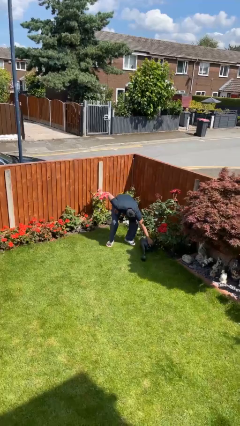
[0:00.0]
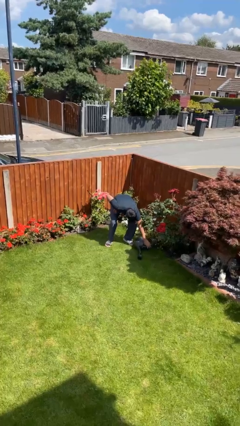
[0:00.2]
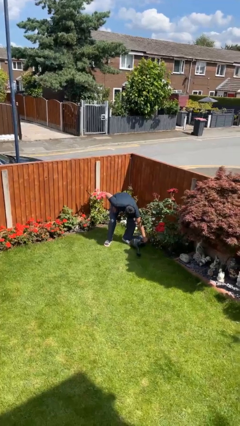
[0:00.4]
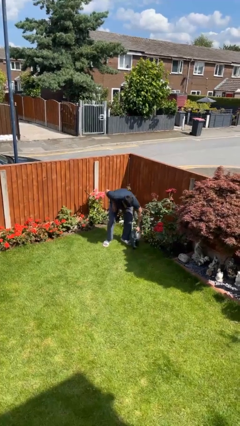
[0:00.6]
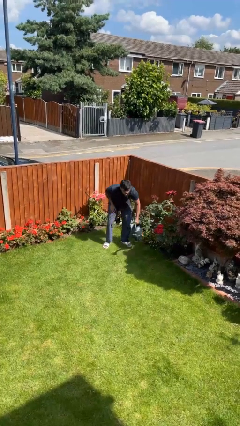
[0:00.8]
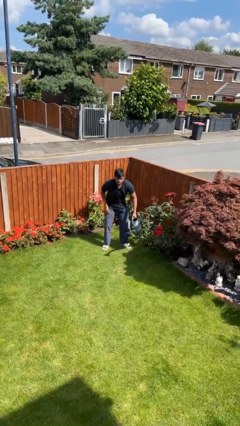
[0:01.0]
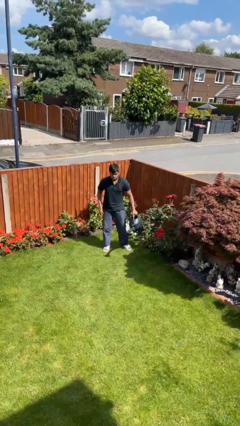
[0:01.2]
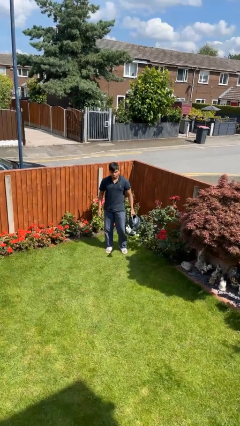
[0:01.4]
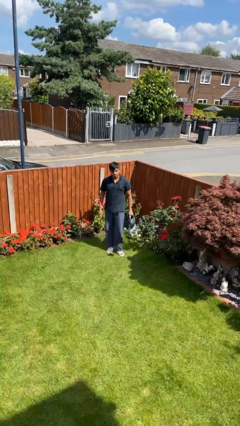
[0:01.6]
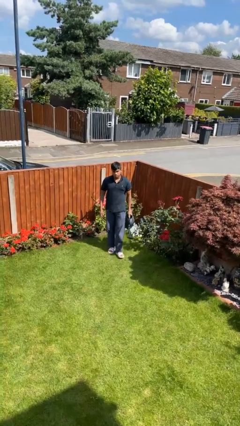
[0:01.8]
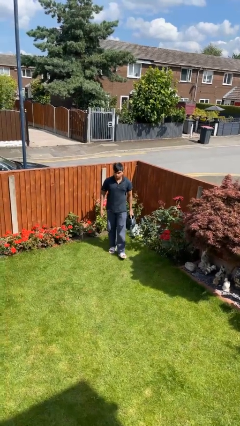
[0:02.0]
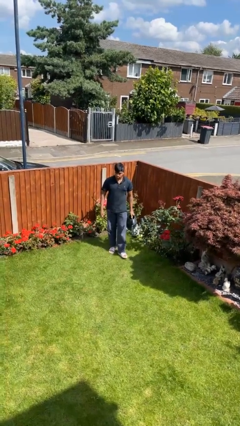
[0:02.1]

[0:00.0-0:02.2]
person picks up object from floor

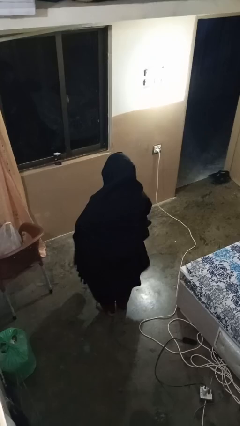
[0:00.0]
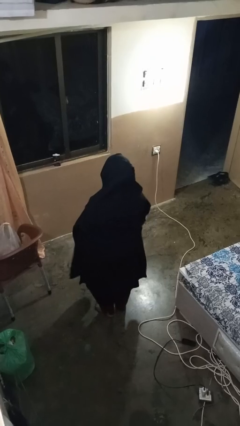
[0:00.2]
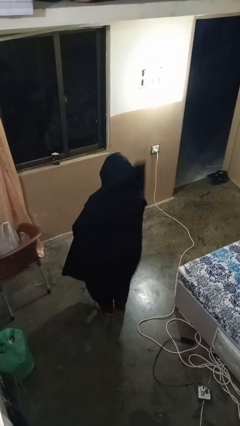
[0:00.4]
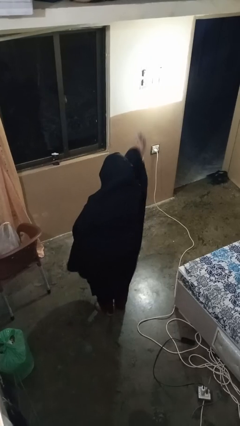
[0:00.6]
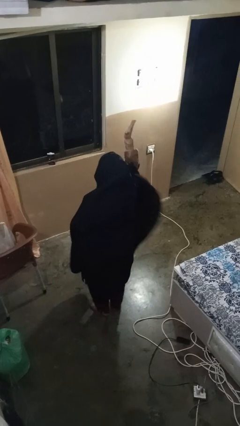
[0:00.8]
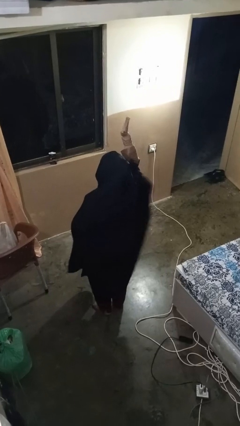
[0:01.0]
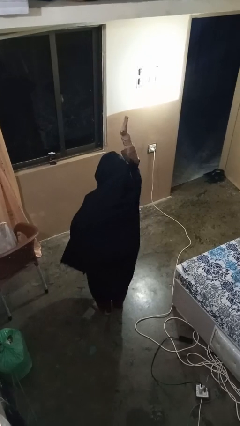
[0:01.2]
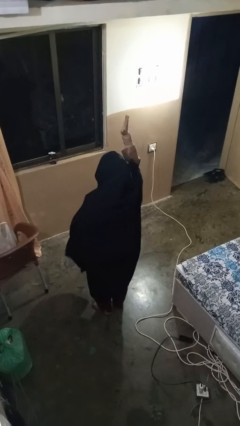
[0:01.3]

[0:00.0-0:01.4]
person gestures raise hand

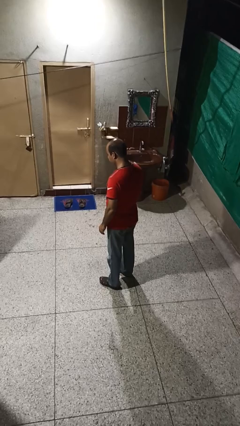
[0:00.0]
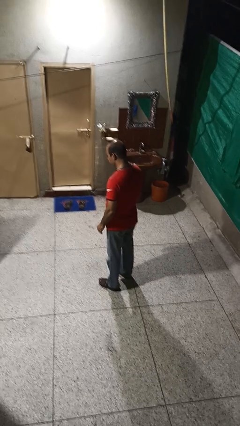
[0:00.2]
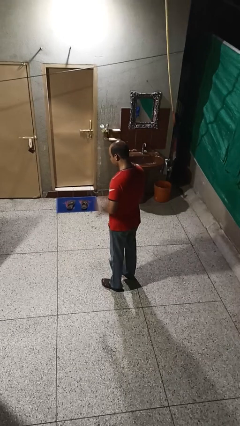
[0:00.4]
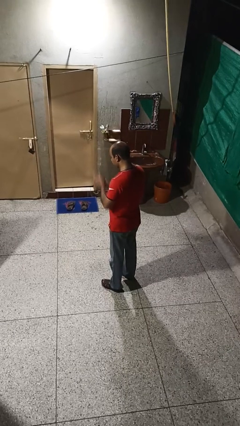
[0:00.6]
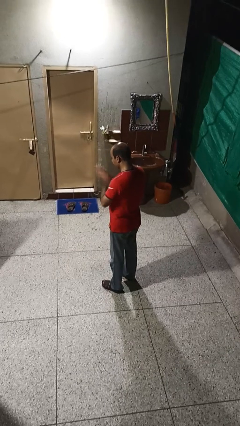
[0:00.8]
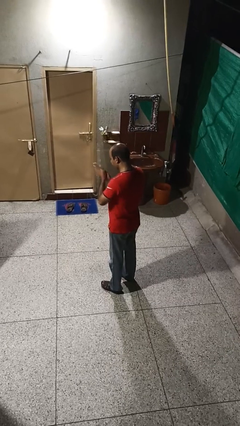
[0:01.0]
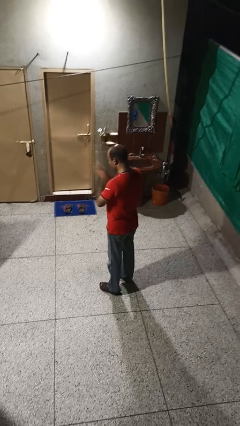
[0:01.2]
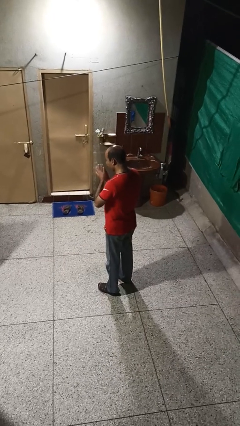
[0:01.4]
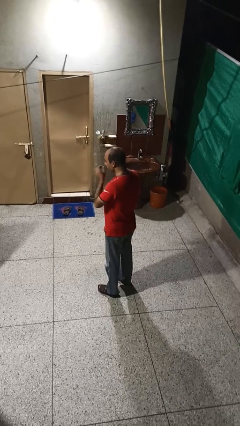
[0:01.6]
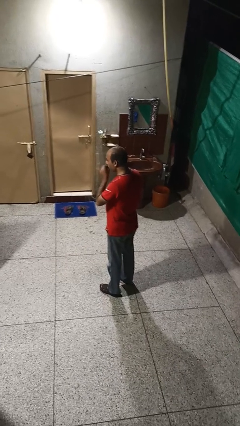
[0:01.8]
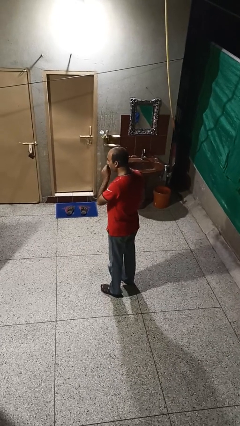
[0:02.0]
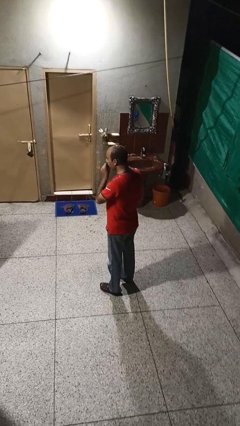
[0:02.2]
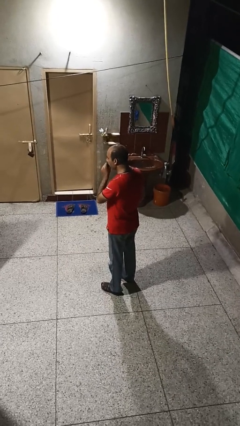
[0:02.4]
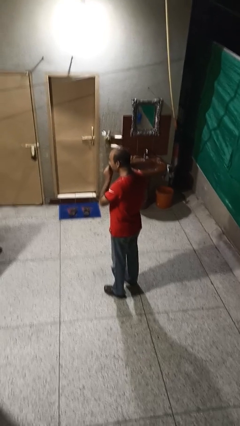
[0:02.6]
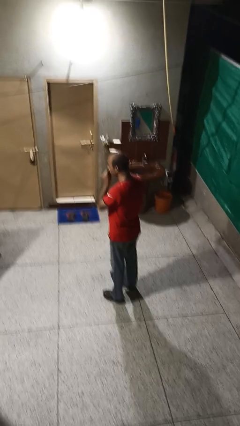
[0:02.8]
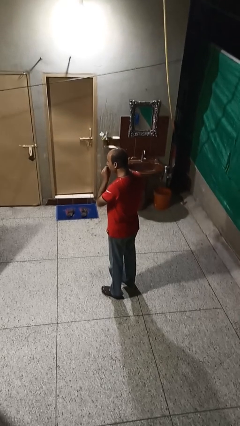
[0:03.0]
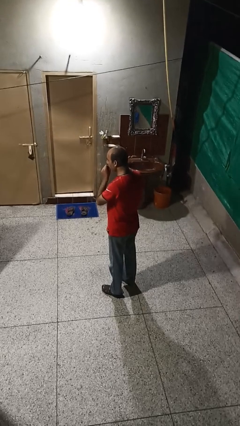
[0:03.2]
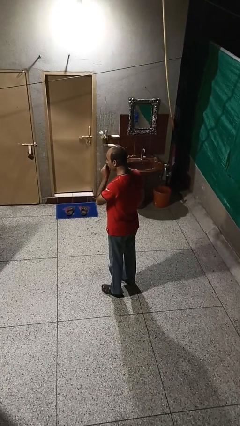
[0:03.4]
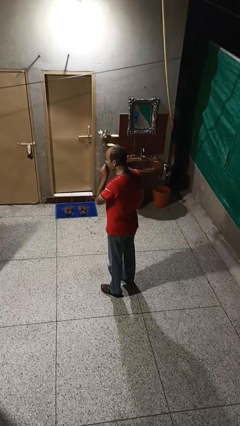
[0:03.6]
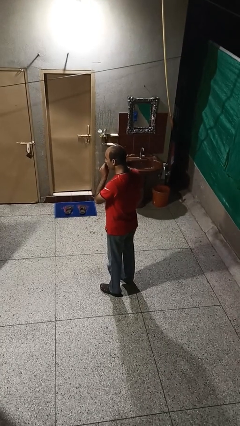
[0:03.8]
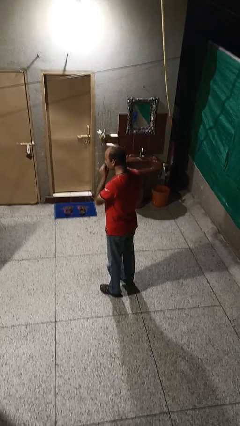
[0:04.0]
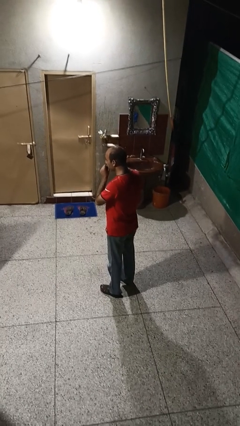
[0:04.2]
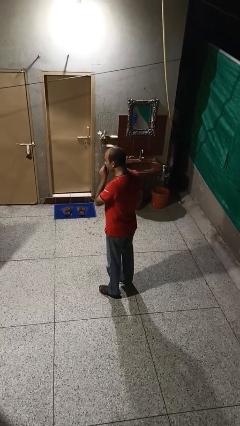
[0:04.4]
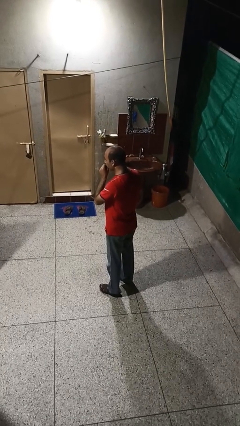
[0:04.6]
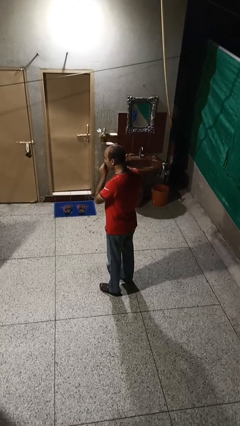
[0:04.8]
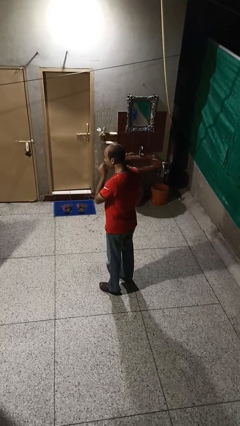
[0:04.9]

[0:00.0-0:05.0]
person blows into hands

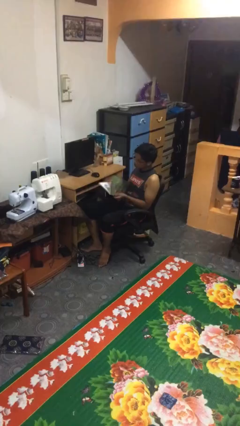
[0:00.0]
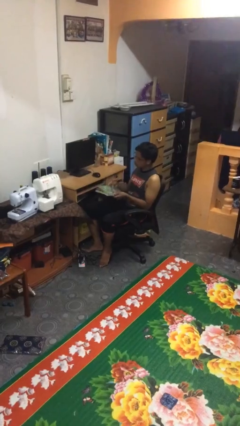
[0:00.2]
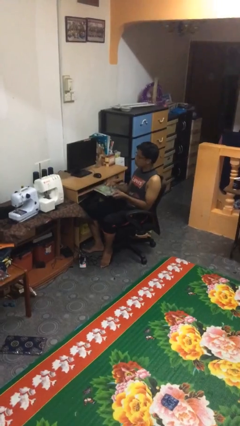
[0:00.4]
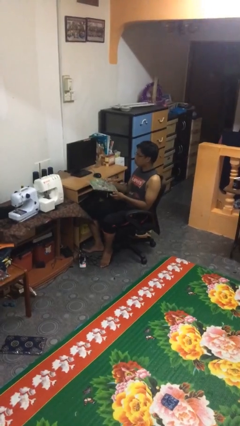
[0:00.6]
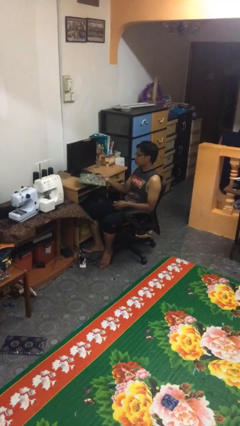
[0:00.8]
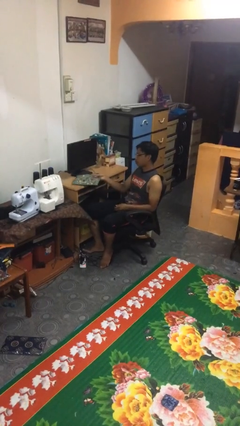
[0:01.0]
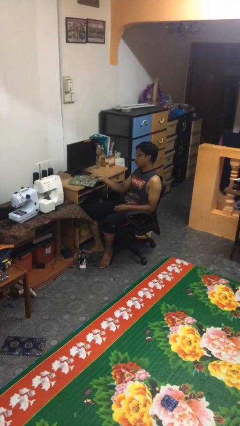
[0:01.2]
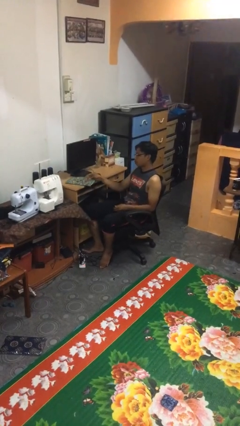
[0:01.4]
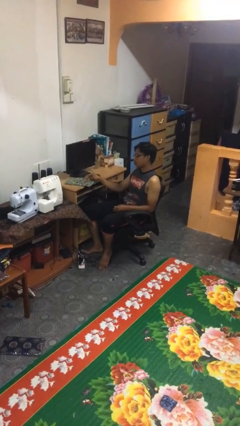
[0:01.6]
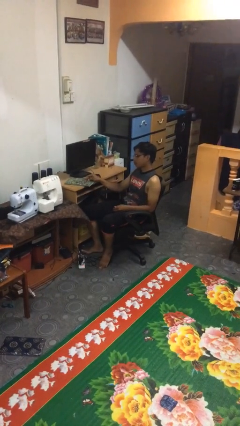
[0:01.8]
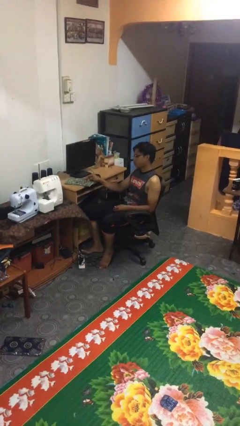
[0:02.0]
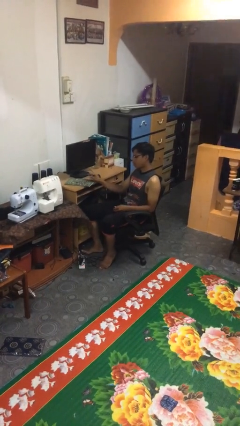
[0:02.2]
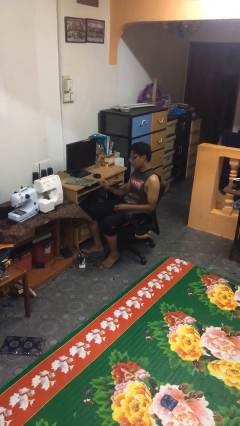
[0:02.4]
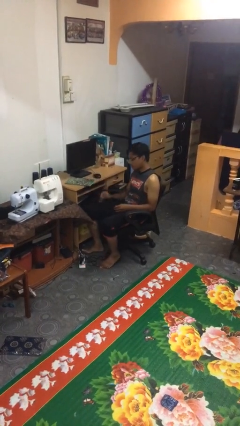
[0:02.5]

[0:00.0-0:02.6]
person puts down object on table

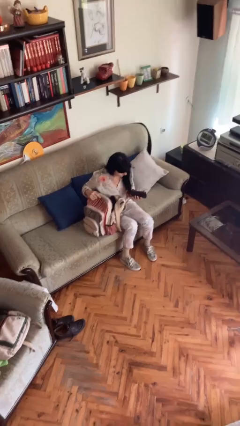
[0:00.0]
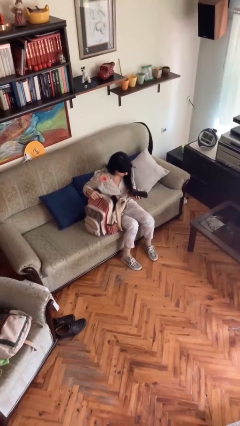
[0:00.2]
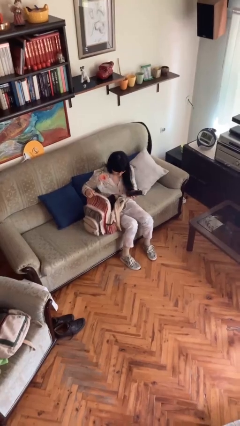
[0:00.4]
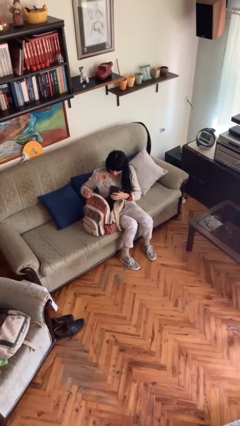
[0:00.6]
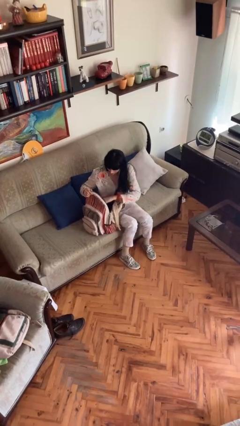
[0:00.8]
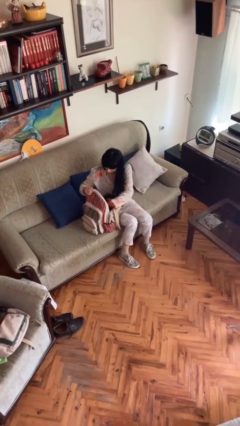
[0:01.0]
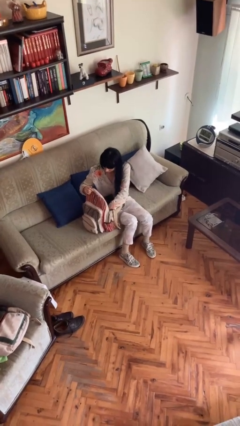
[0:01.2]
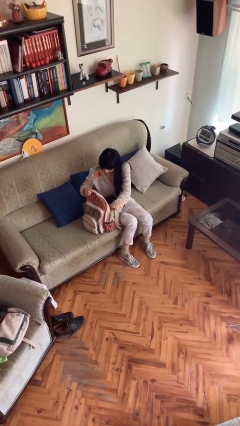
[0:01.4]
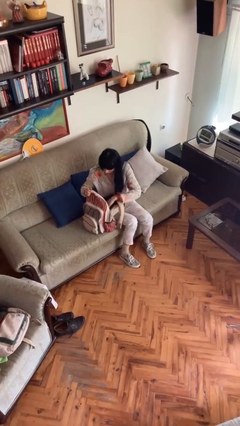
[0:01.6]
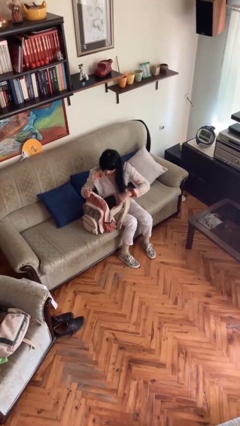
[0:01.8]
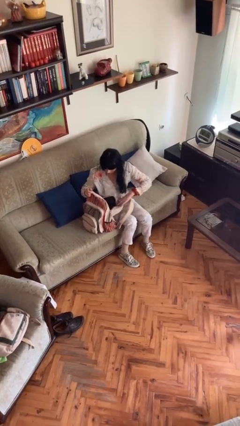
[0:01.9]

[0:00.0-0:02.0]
person puts object into backpack

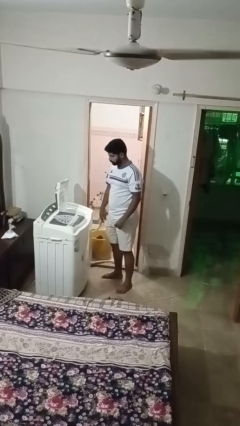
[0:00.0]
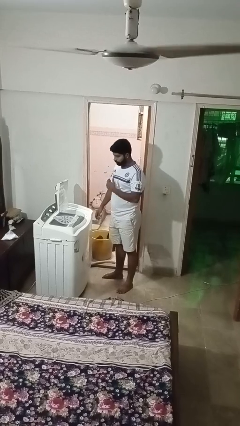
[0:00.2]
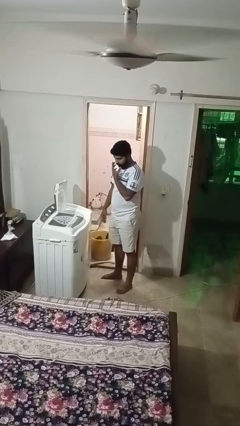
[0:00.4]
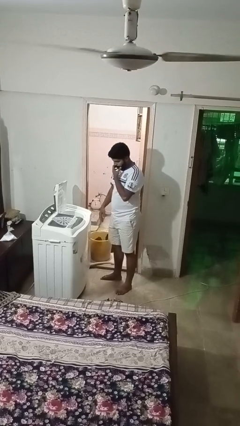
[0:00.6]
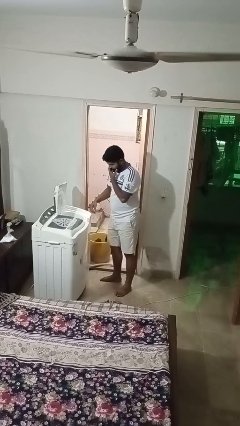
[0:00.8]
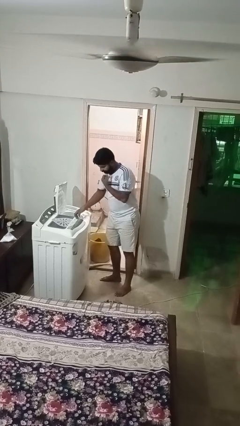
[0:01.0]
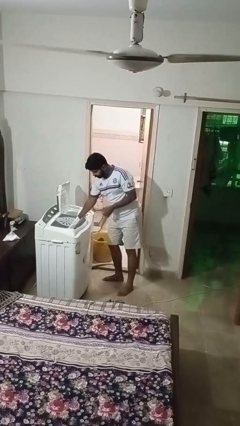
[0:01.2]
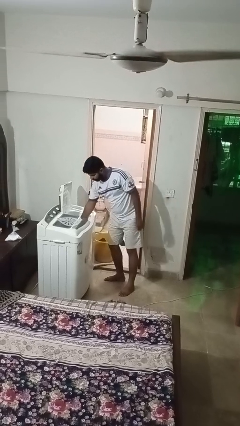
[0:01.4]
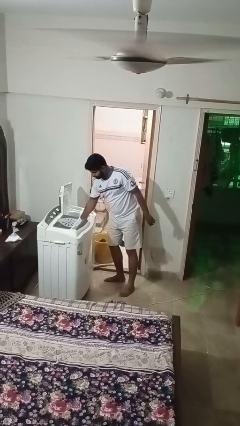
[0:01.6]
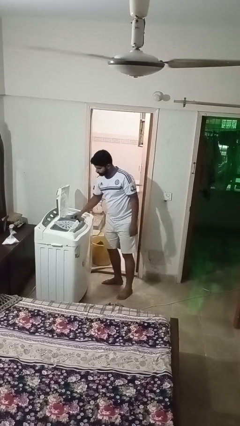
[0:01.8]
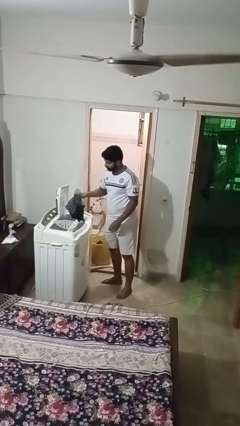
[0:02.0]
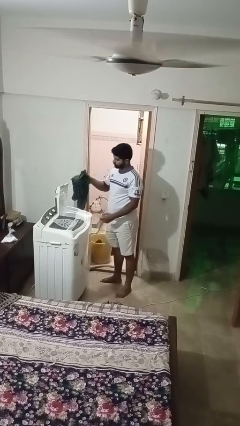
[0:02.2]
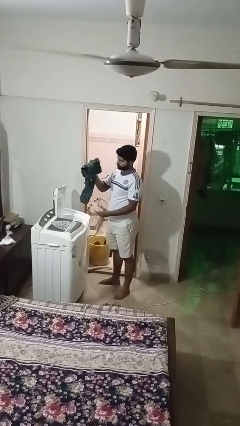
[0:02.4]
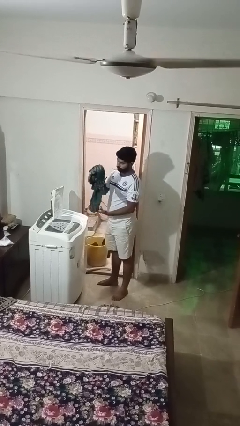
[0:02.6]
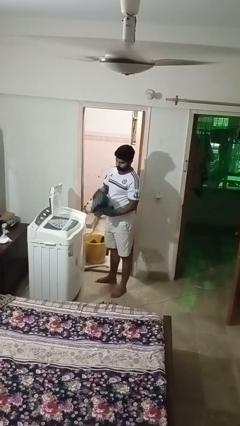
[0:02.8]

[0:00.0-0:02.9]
person unloads dryer

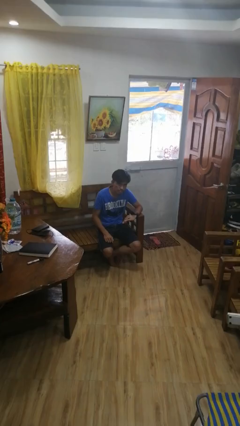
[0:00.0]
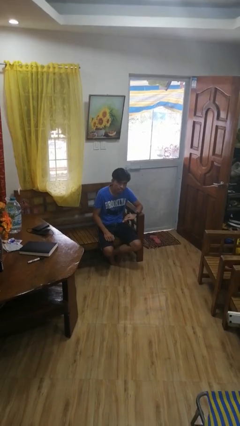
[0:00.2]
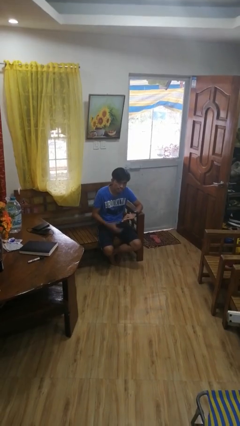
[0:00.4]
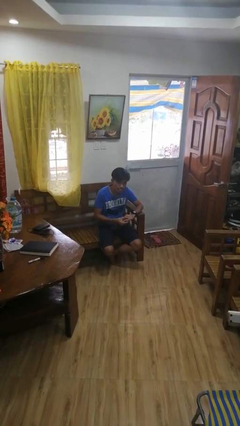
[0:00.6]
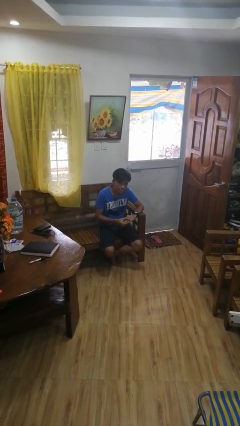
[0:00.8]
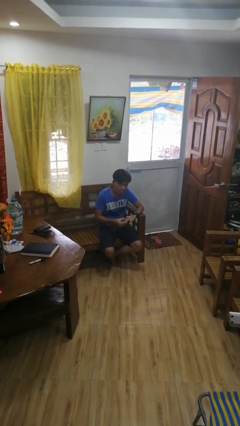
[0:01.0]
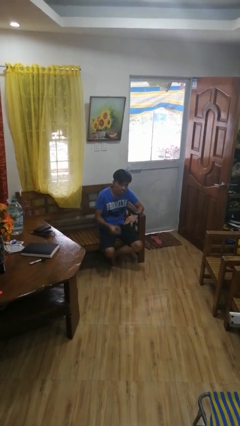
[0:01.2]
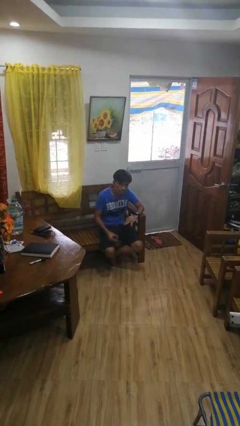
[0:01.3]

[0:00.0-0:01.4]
person takes off ring
